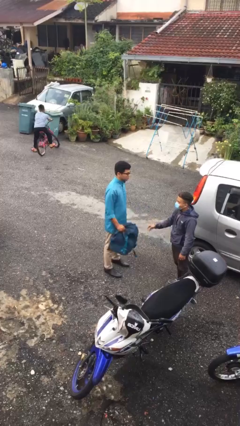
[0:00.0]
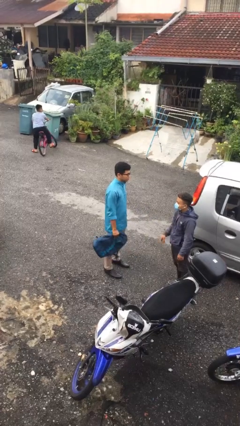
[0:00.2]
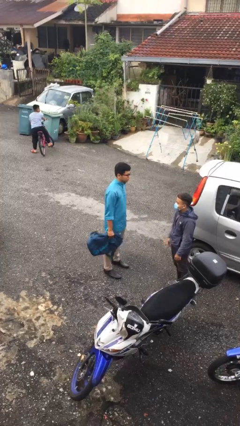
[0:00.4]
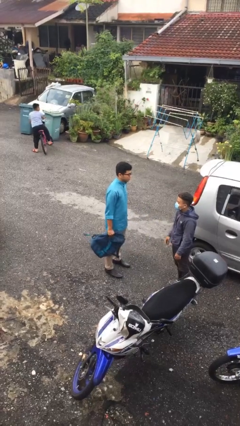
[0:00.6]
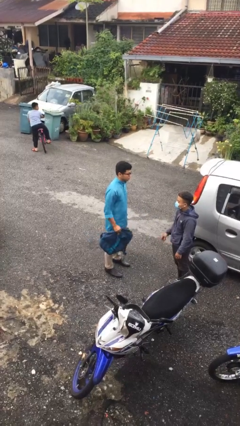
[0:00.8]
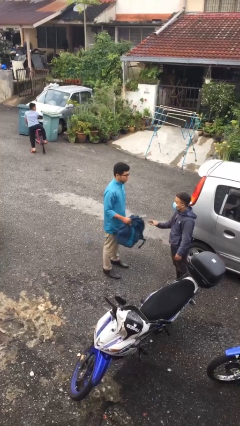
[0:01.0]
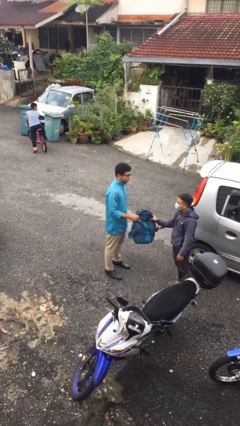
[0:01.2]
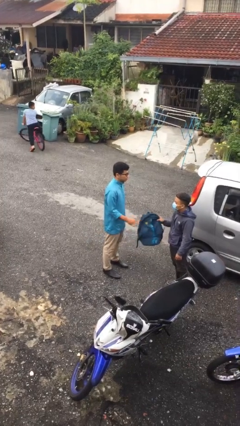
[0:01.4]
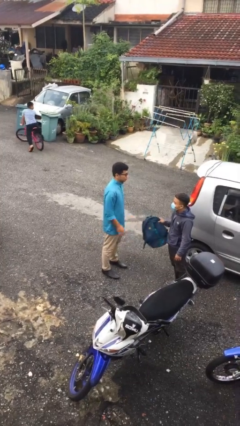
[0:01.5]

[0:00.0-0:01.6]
person transfers object to person

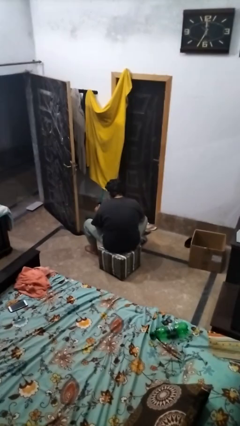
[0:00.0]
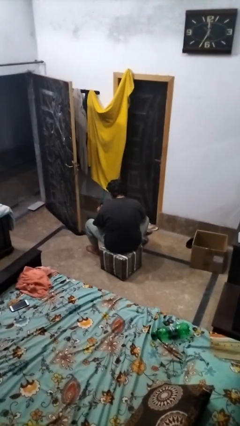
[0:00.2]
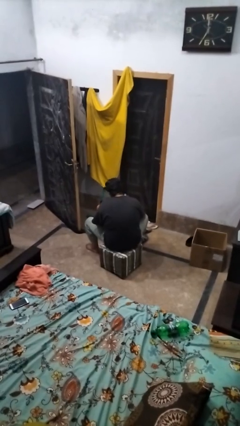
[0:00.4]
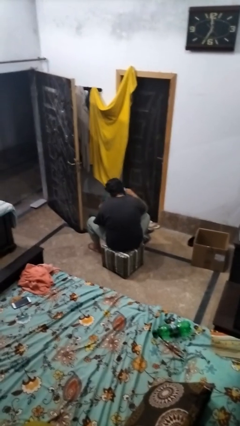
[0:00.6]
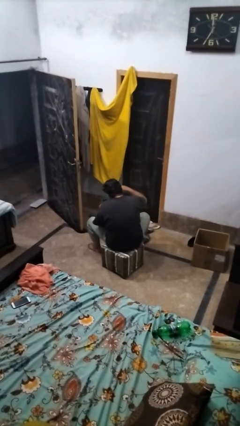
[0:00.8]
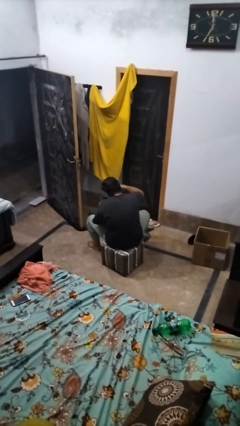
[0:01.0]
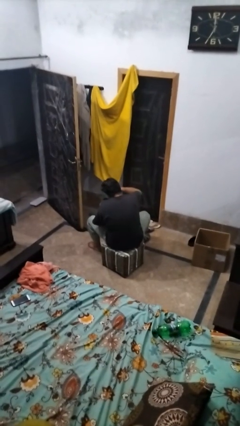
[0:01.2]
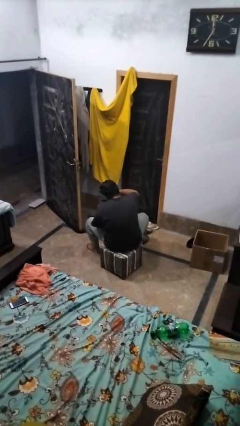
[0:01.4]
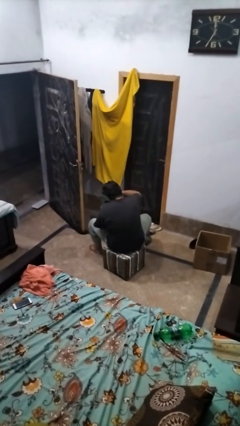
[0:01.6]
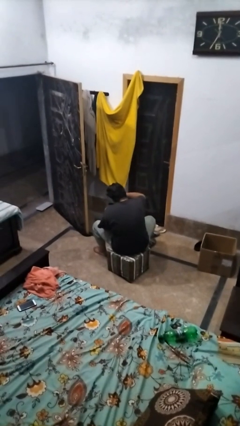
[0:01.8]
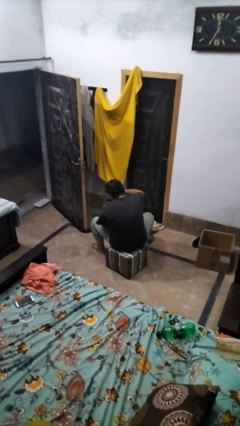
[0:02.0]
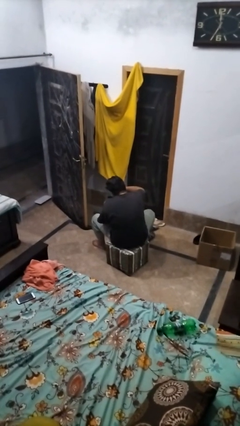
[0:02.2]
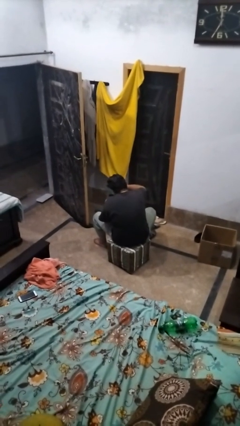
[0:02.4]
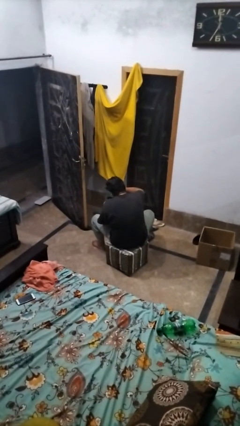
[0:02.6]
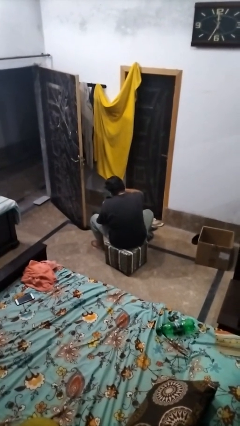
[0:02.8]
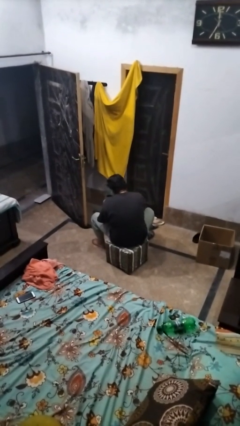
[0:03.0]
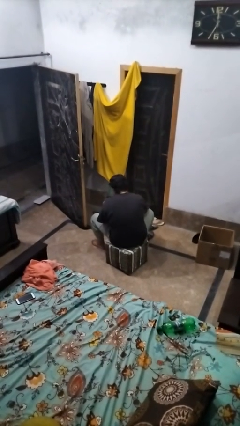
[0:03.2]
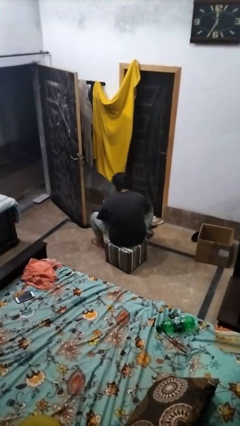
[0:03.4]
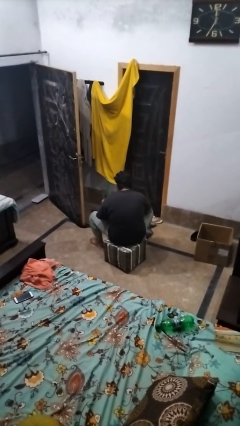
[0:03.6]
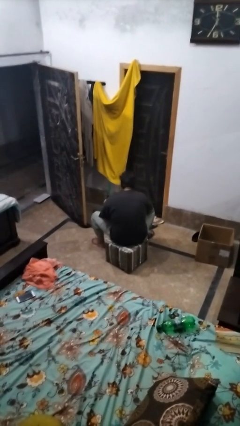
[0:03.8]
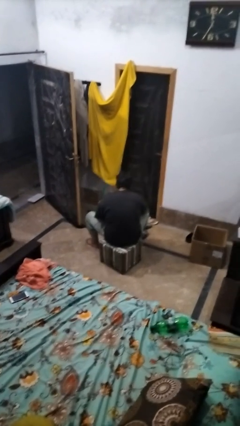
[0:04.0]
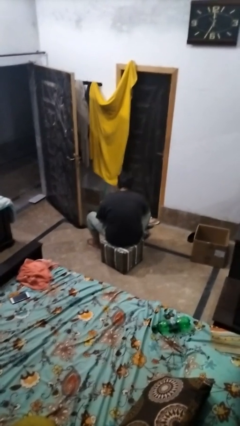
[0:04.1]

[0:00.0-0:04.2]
person pours coffee into mug

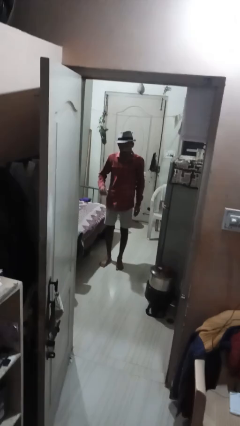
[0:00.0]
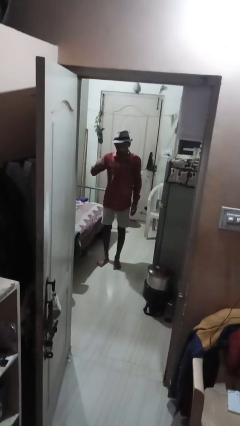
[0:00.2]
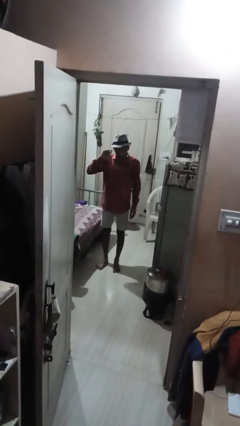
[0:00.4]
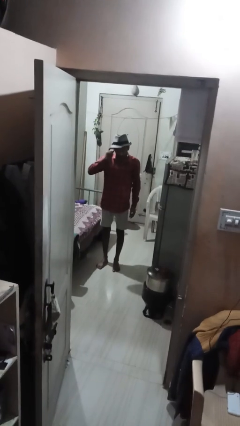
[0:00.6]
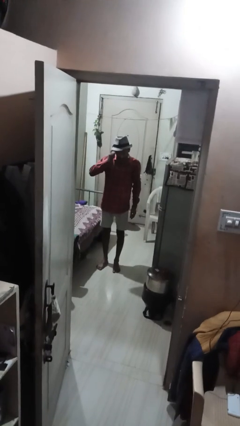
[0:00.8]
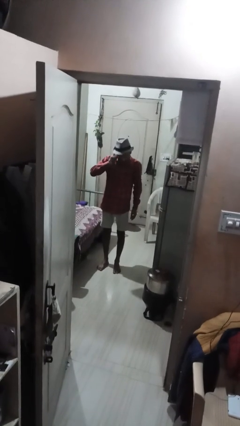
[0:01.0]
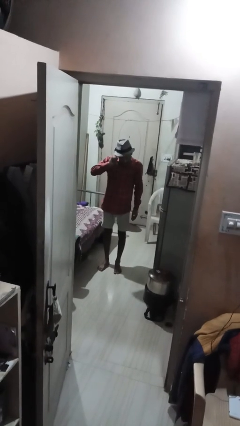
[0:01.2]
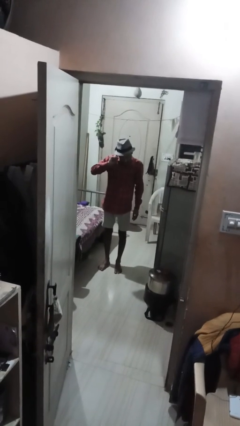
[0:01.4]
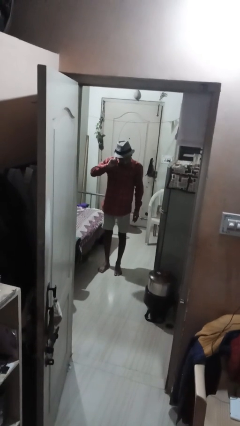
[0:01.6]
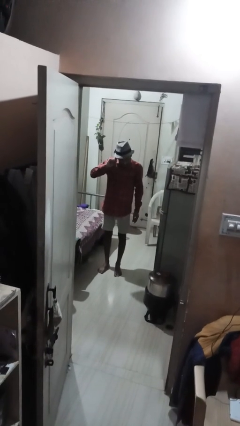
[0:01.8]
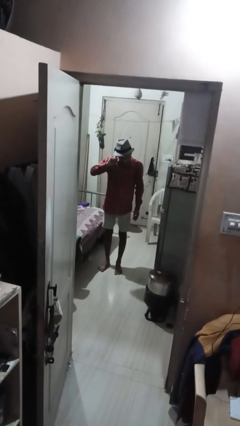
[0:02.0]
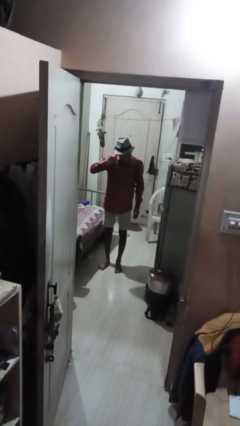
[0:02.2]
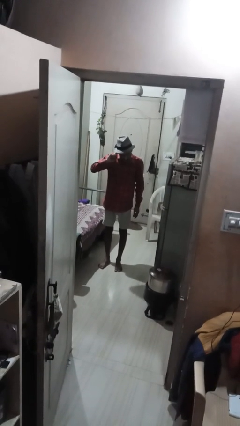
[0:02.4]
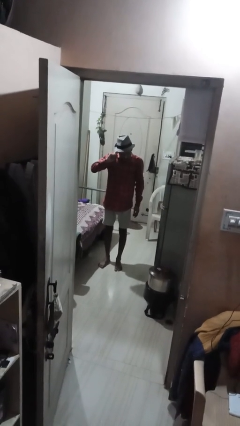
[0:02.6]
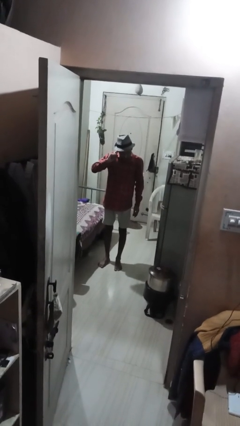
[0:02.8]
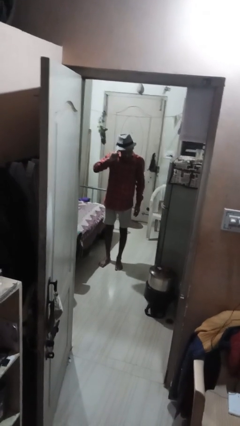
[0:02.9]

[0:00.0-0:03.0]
person touches earlobe

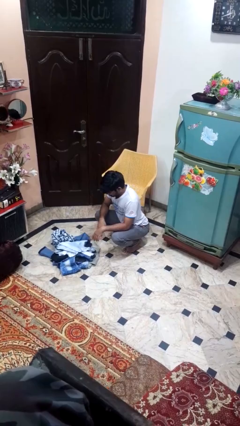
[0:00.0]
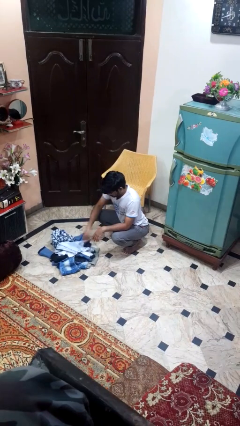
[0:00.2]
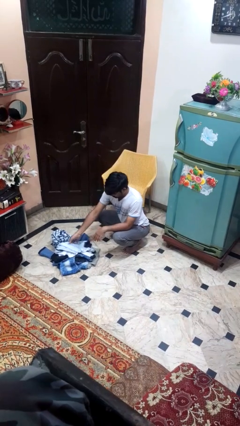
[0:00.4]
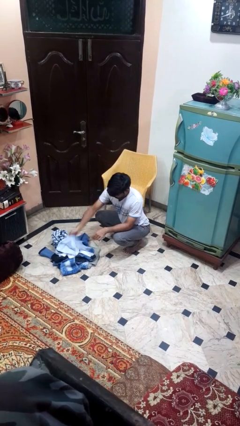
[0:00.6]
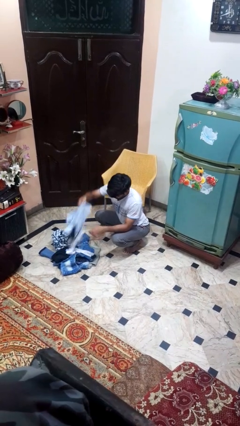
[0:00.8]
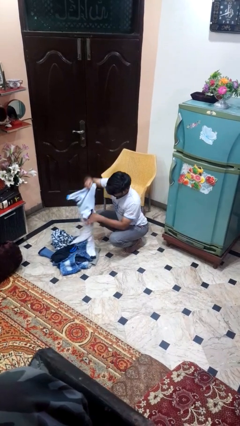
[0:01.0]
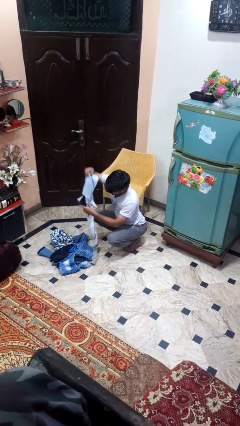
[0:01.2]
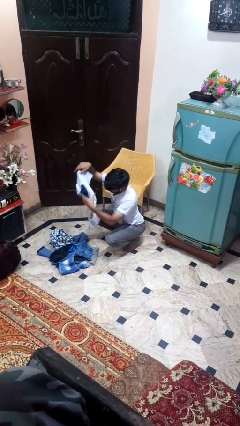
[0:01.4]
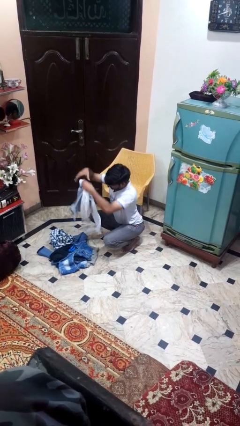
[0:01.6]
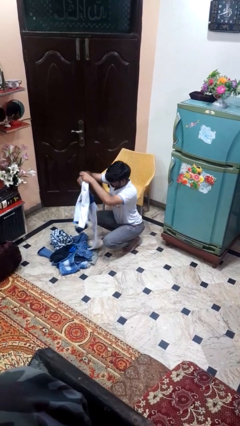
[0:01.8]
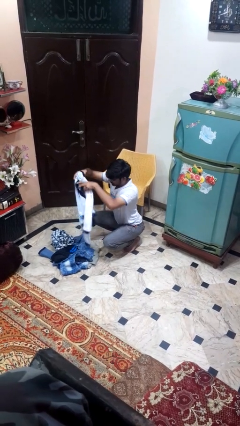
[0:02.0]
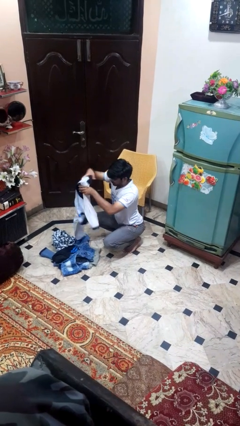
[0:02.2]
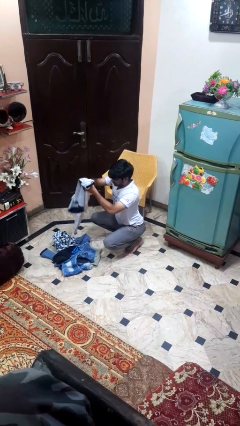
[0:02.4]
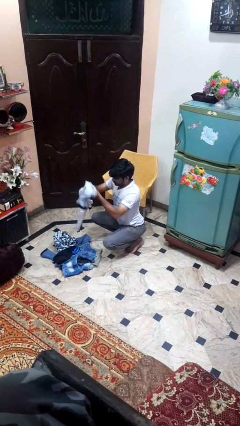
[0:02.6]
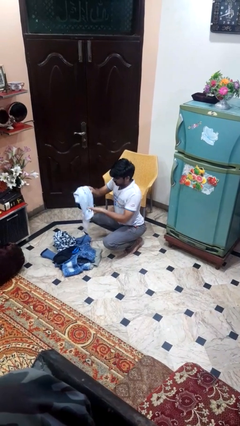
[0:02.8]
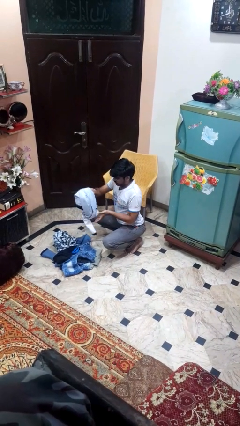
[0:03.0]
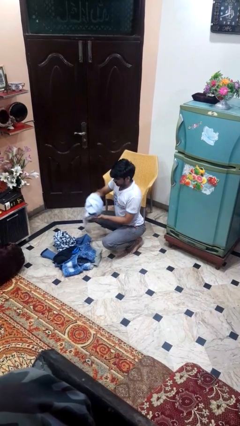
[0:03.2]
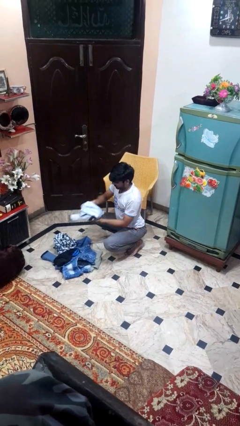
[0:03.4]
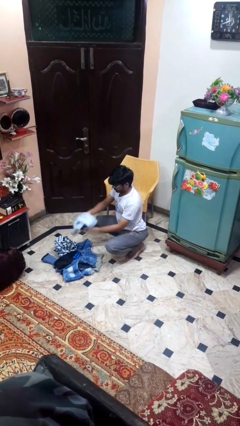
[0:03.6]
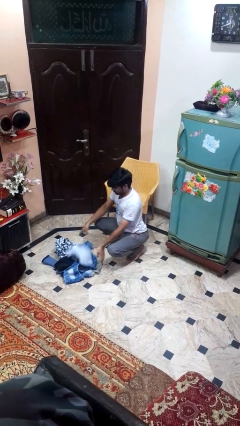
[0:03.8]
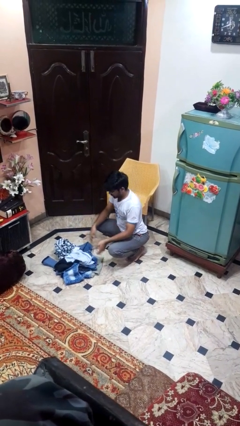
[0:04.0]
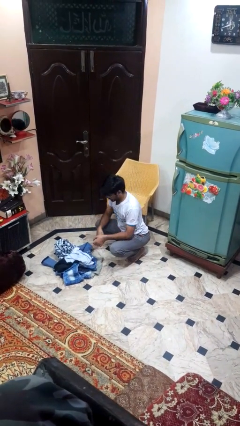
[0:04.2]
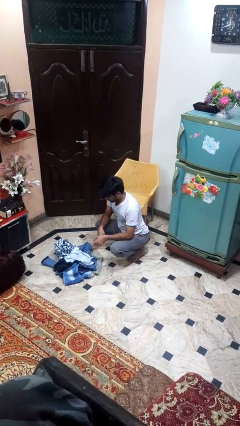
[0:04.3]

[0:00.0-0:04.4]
person folds pants

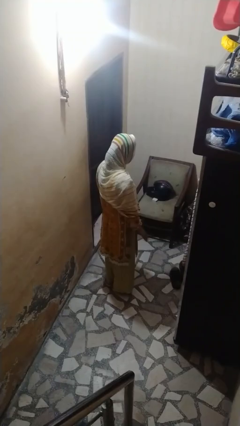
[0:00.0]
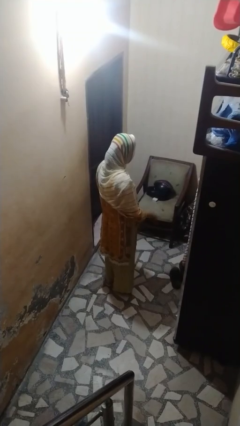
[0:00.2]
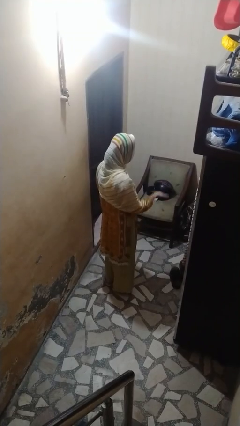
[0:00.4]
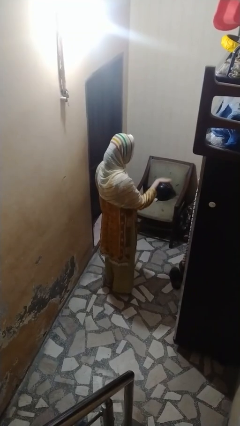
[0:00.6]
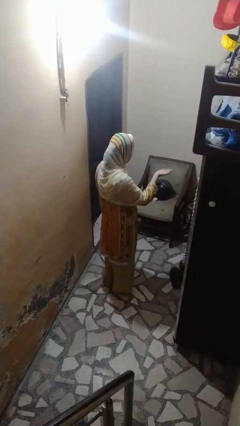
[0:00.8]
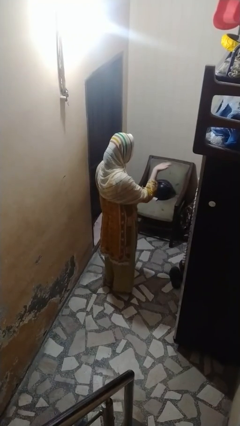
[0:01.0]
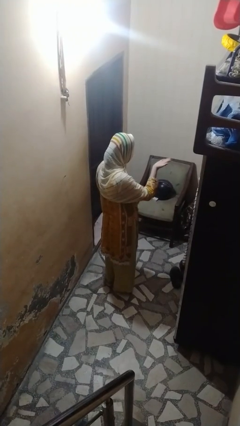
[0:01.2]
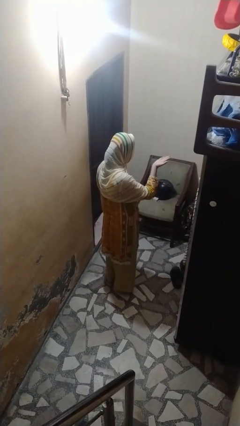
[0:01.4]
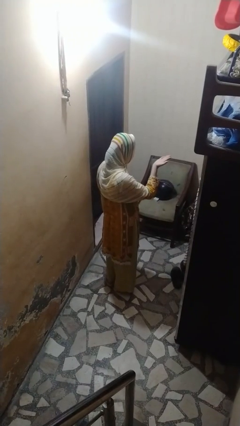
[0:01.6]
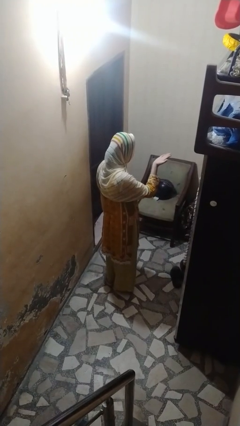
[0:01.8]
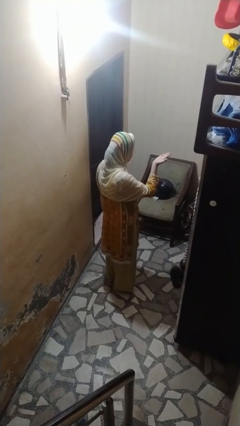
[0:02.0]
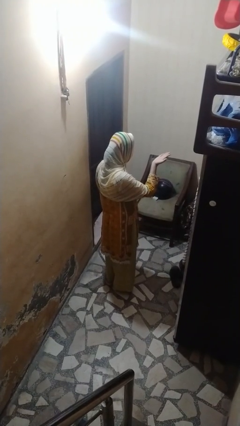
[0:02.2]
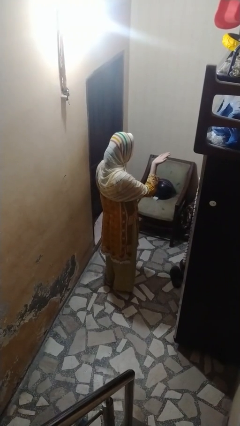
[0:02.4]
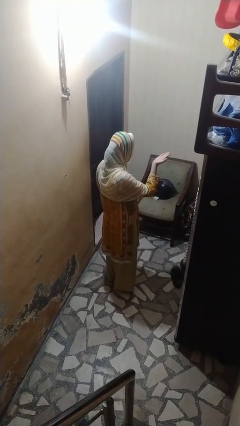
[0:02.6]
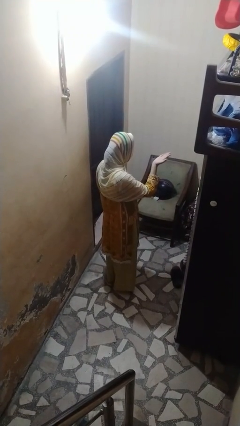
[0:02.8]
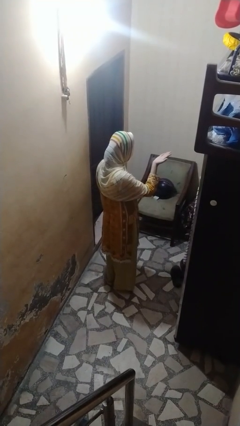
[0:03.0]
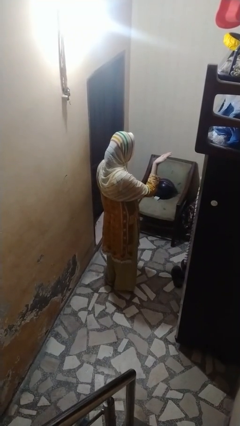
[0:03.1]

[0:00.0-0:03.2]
person gestures swipe up

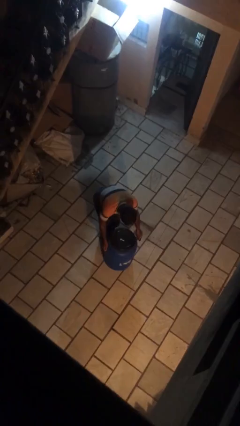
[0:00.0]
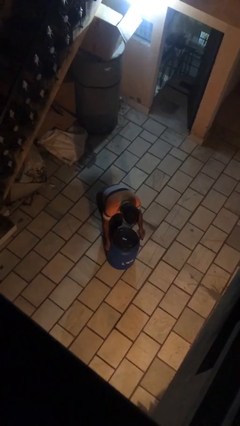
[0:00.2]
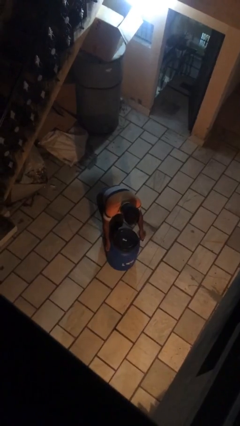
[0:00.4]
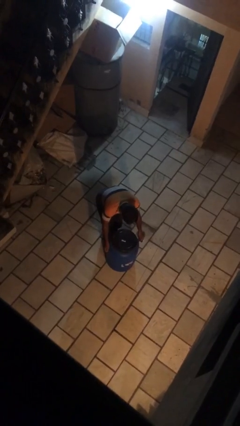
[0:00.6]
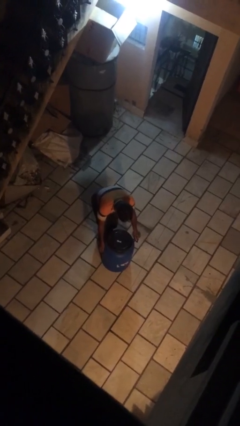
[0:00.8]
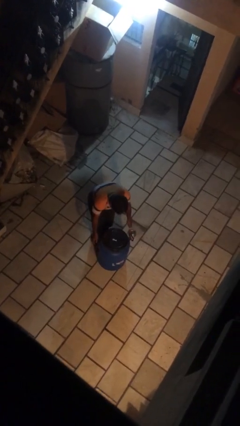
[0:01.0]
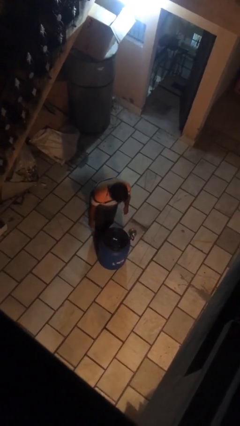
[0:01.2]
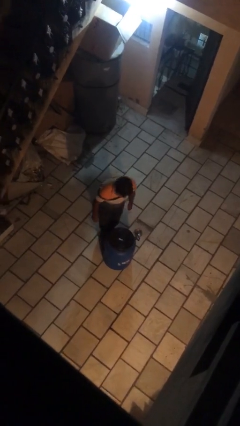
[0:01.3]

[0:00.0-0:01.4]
person puts down object on floor
